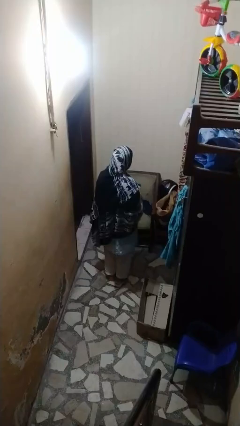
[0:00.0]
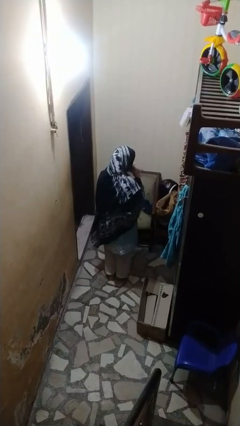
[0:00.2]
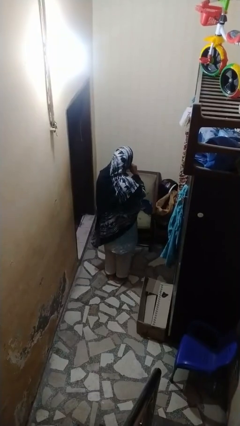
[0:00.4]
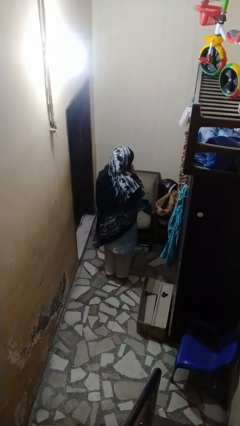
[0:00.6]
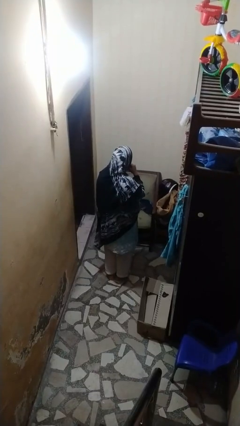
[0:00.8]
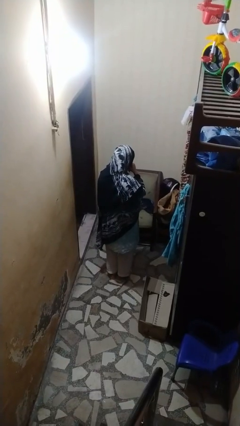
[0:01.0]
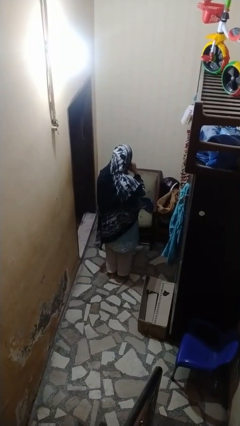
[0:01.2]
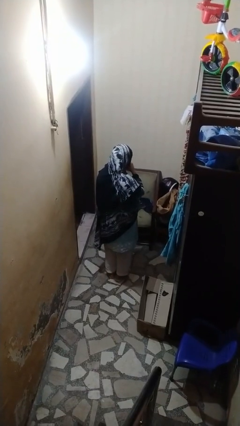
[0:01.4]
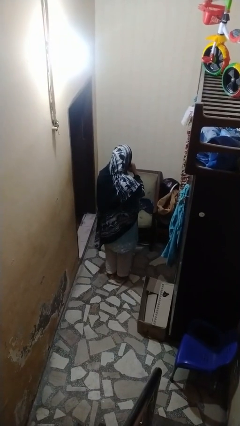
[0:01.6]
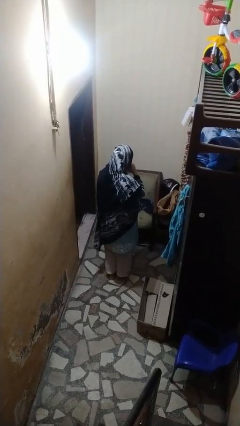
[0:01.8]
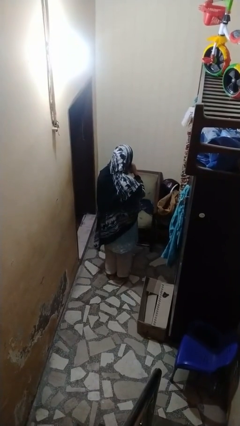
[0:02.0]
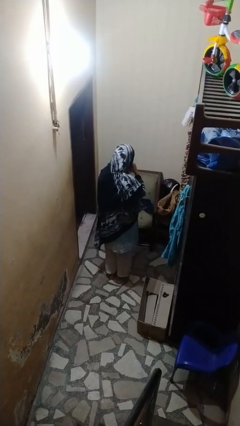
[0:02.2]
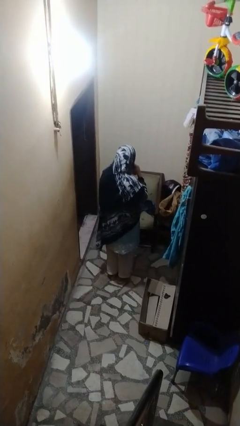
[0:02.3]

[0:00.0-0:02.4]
person blows nose

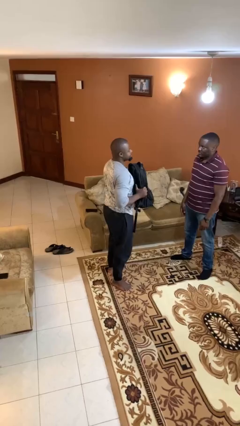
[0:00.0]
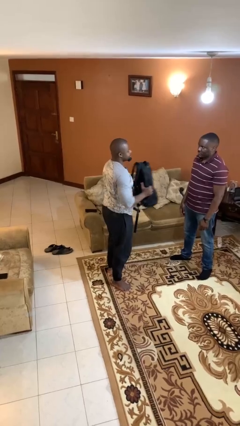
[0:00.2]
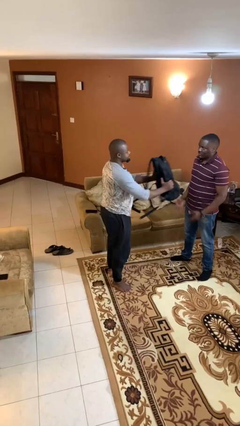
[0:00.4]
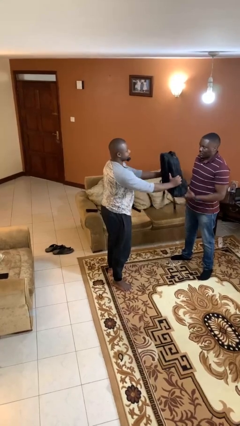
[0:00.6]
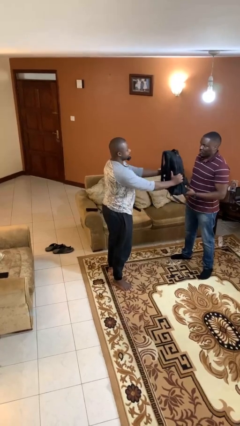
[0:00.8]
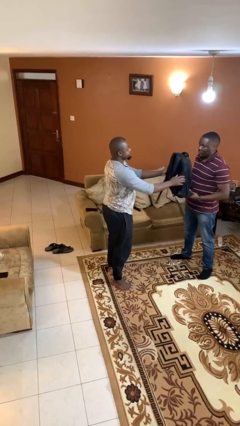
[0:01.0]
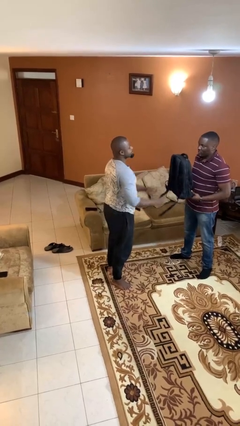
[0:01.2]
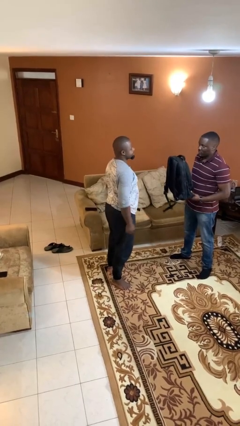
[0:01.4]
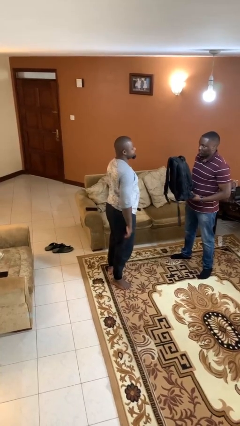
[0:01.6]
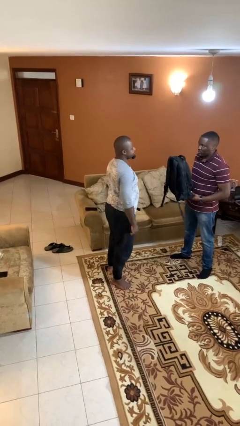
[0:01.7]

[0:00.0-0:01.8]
person transfers object to person

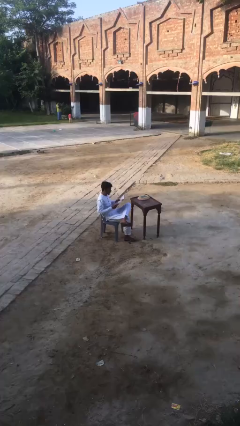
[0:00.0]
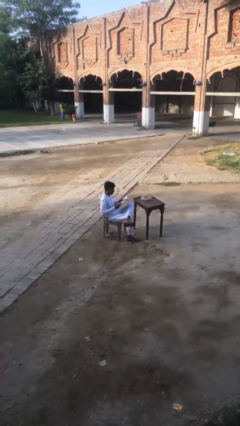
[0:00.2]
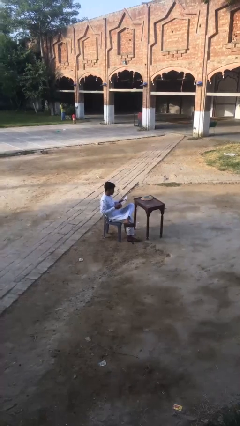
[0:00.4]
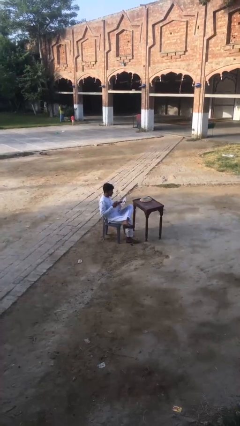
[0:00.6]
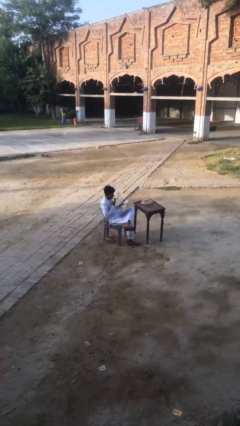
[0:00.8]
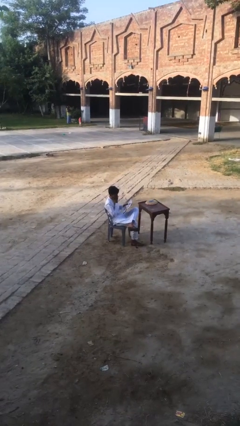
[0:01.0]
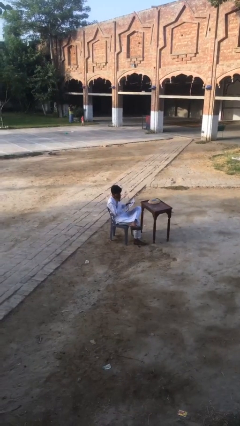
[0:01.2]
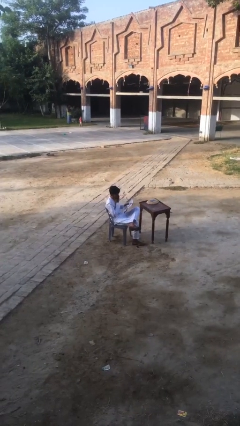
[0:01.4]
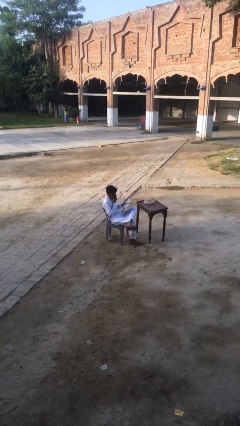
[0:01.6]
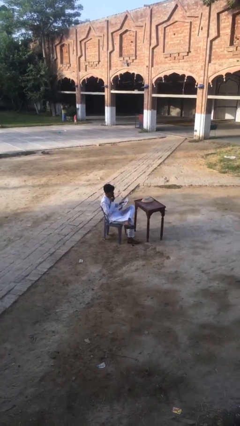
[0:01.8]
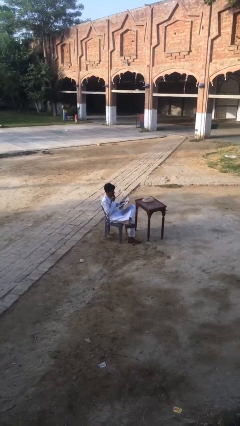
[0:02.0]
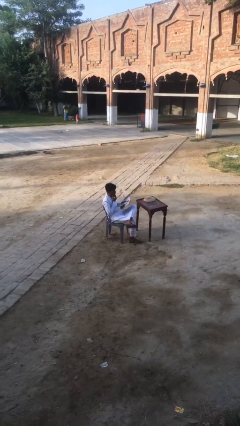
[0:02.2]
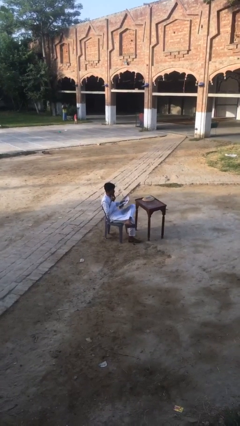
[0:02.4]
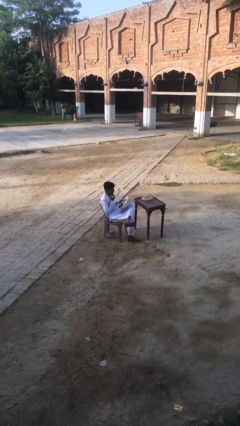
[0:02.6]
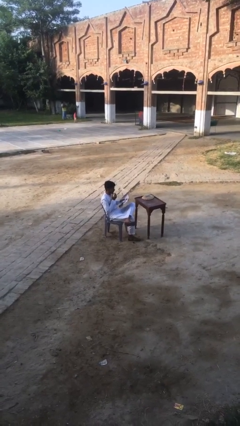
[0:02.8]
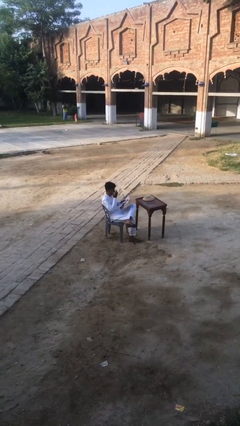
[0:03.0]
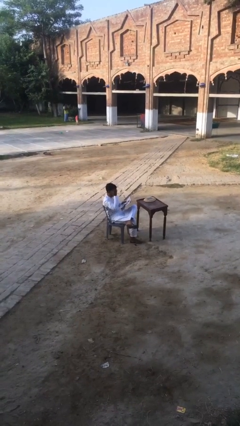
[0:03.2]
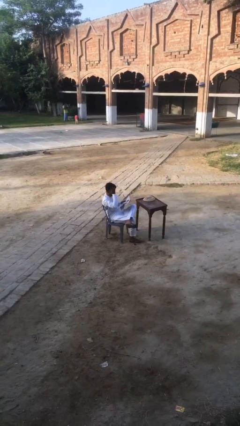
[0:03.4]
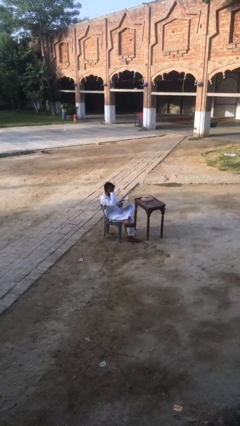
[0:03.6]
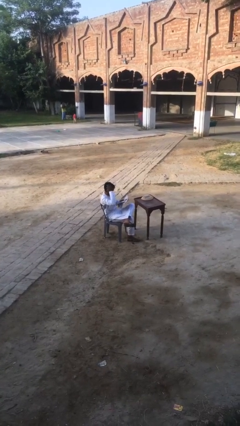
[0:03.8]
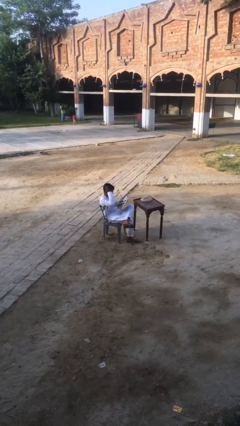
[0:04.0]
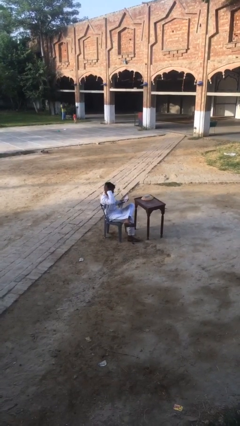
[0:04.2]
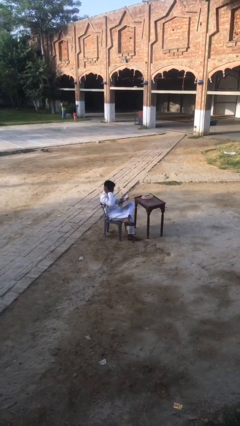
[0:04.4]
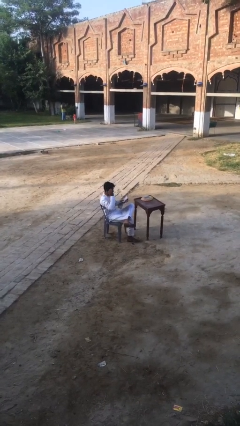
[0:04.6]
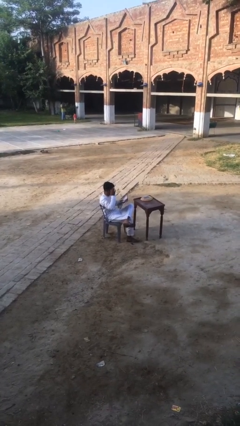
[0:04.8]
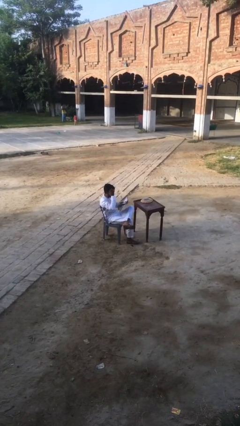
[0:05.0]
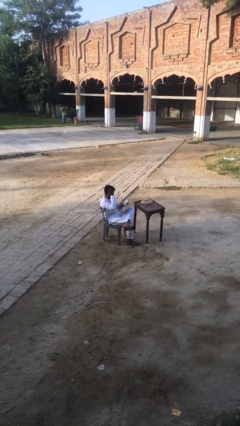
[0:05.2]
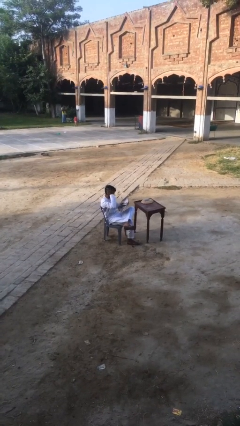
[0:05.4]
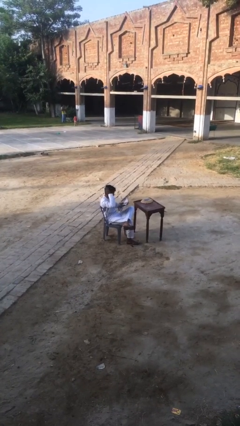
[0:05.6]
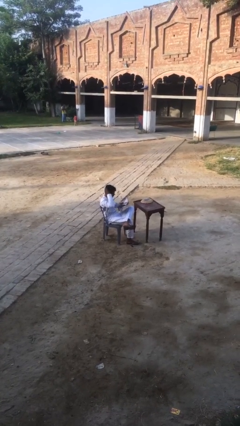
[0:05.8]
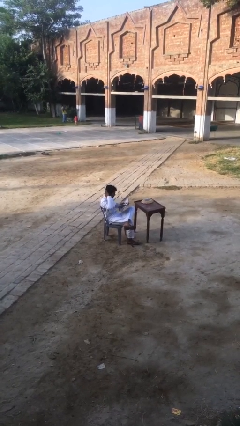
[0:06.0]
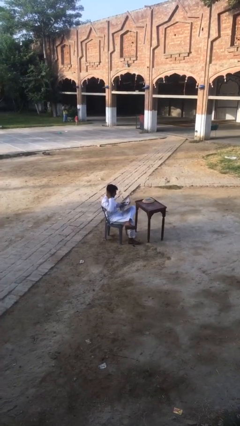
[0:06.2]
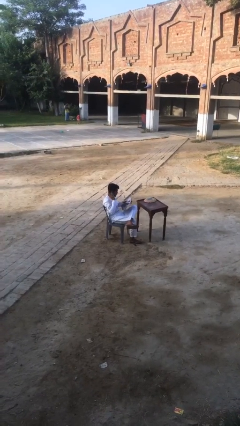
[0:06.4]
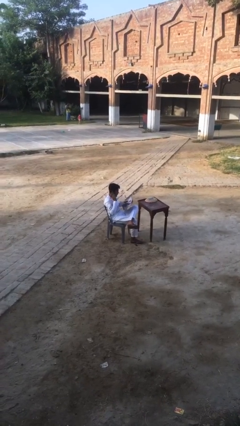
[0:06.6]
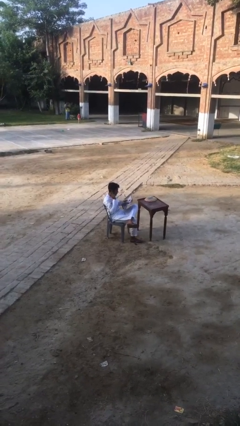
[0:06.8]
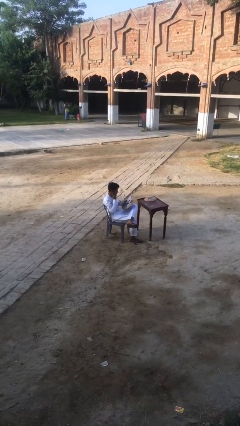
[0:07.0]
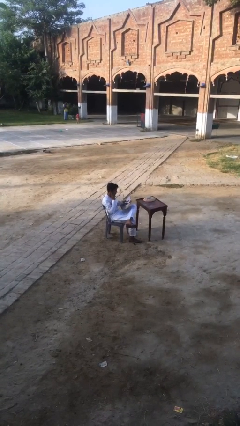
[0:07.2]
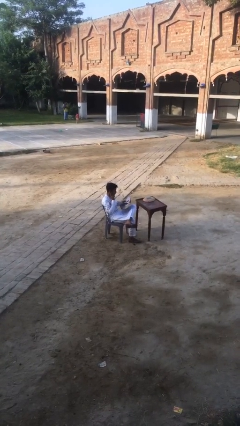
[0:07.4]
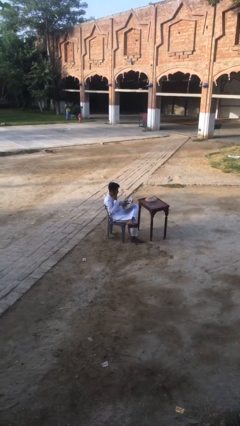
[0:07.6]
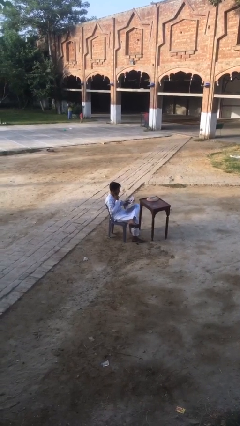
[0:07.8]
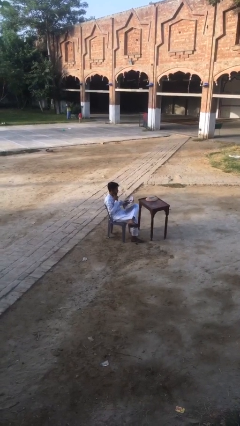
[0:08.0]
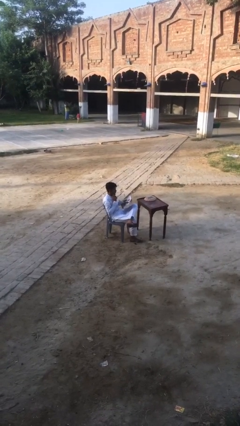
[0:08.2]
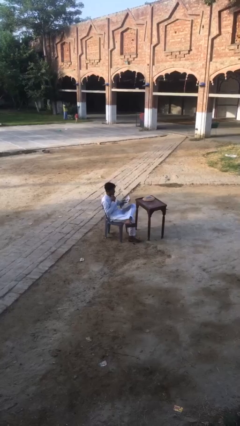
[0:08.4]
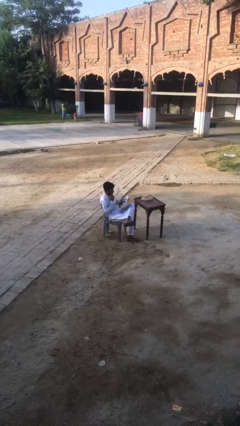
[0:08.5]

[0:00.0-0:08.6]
person reads document

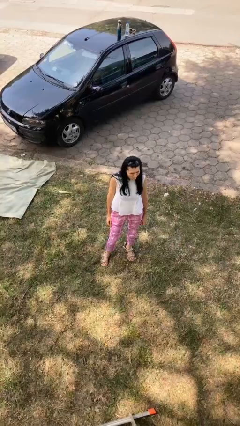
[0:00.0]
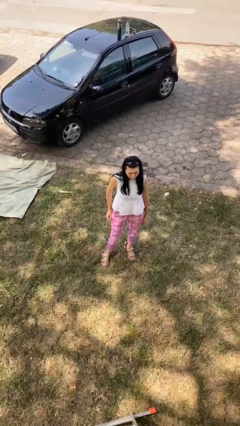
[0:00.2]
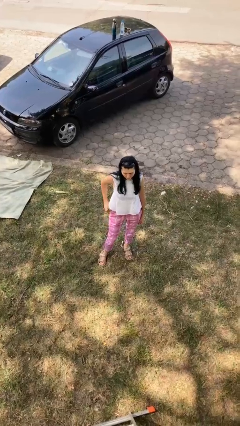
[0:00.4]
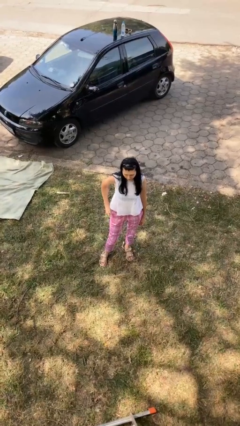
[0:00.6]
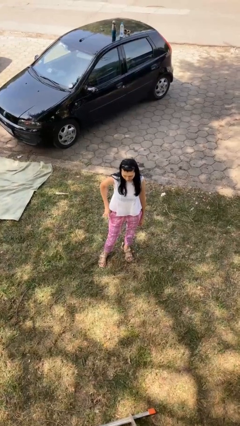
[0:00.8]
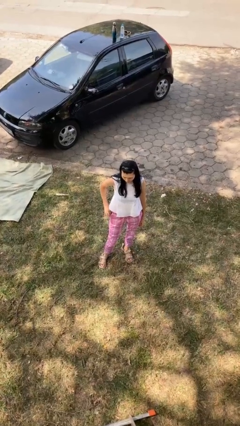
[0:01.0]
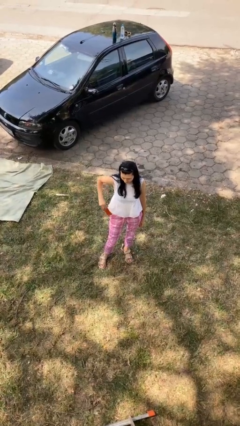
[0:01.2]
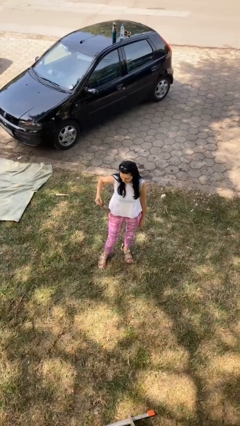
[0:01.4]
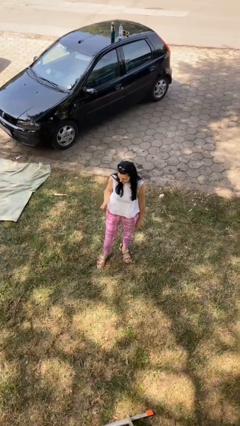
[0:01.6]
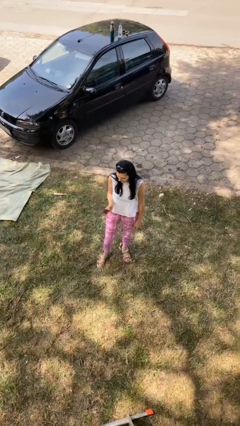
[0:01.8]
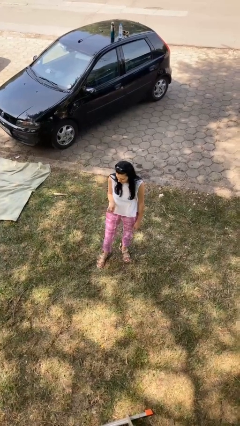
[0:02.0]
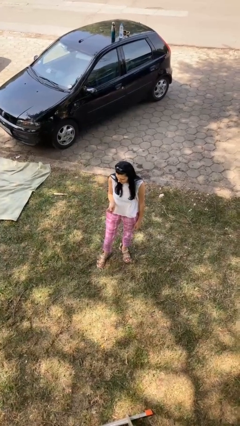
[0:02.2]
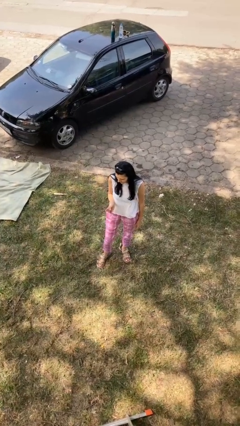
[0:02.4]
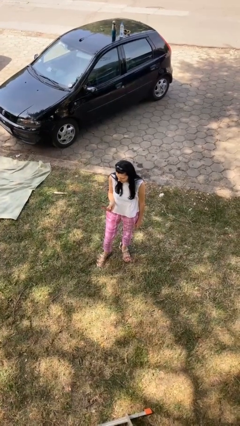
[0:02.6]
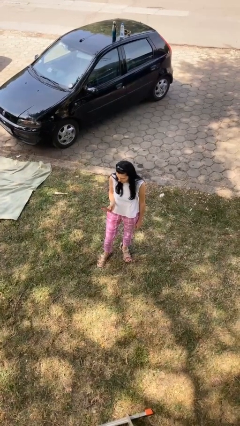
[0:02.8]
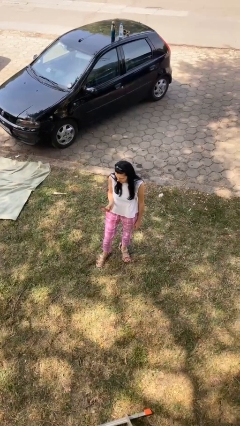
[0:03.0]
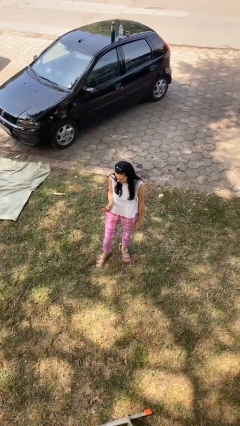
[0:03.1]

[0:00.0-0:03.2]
person takes phone from pocket

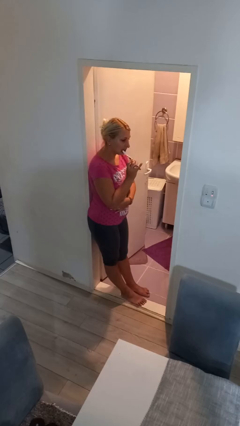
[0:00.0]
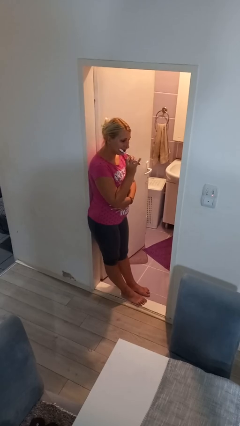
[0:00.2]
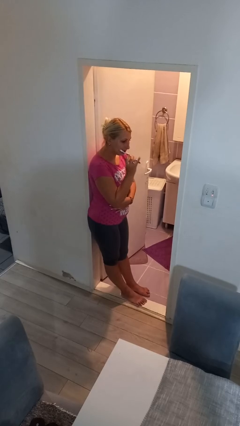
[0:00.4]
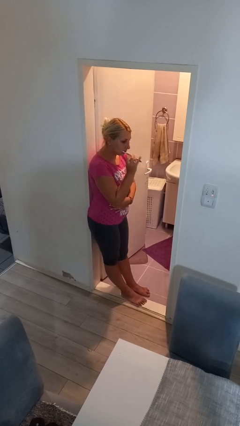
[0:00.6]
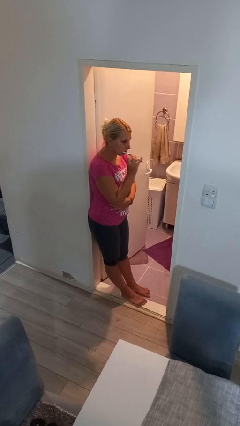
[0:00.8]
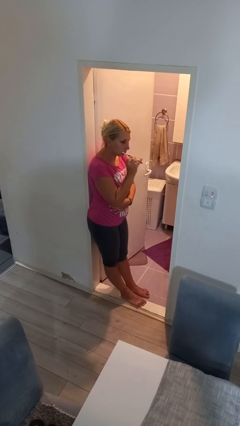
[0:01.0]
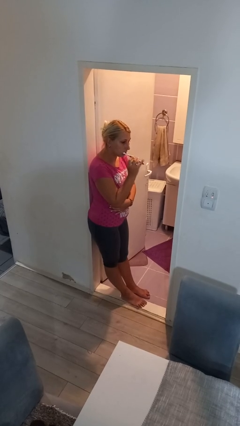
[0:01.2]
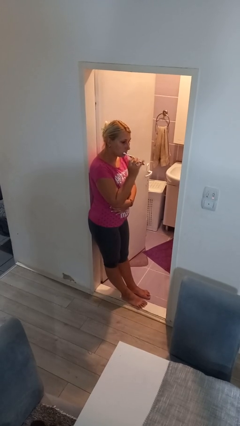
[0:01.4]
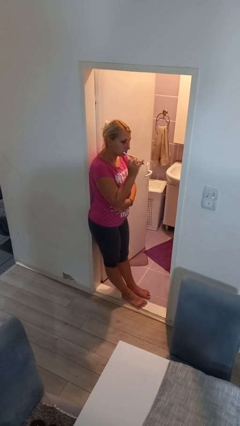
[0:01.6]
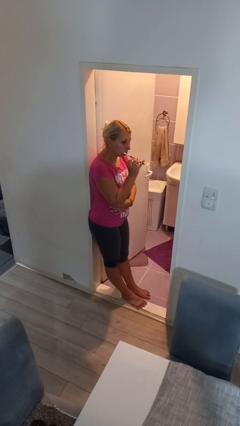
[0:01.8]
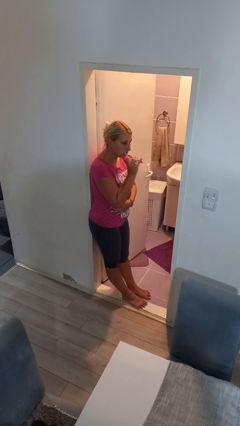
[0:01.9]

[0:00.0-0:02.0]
person brushes teeth
